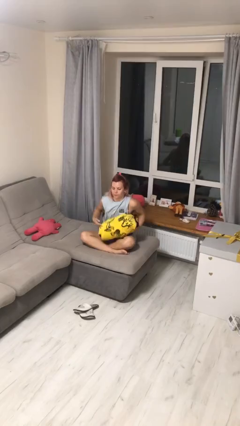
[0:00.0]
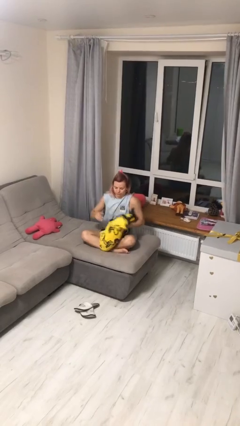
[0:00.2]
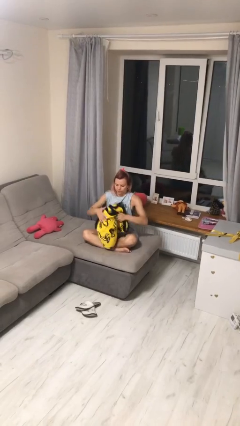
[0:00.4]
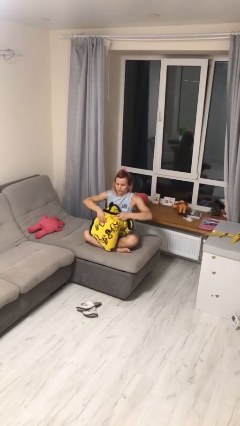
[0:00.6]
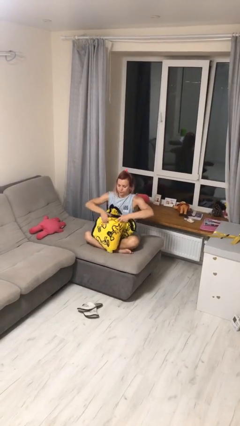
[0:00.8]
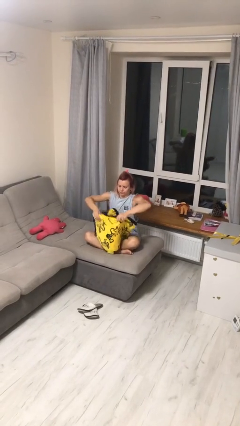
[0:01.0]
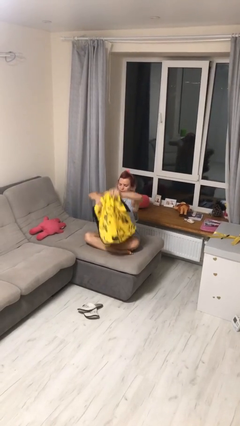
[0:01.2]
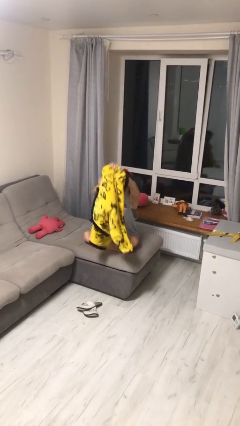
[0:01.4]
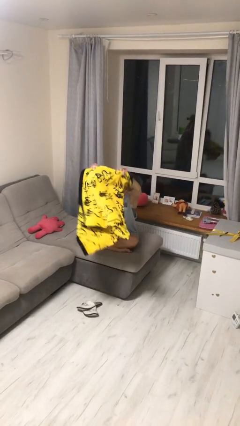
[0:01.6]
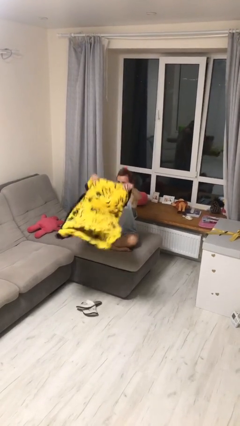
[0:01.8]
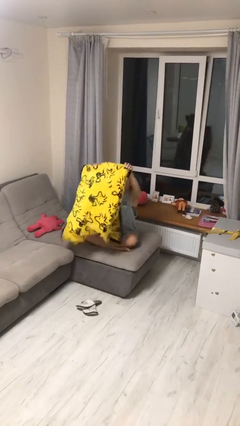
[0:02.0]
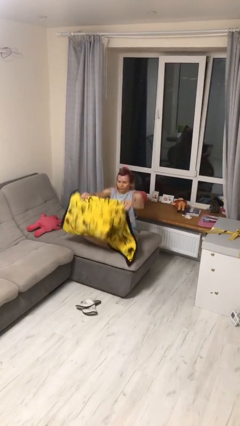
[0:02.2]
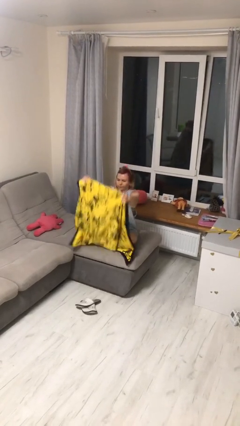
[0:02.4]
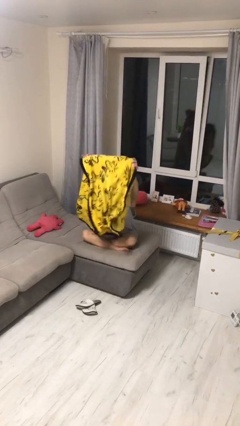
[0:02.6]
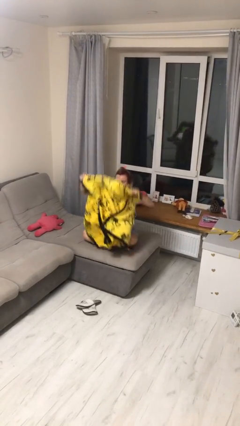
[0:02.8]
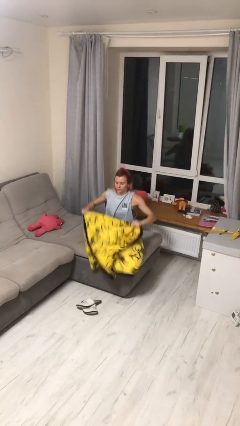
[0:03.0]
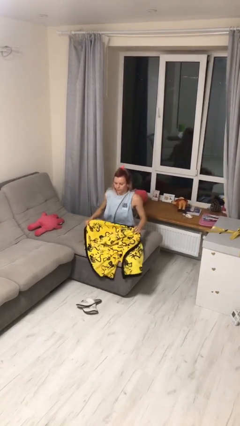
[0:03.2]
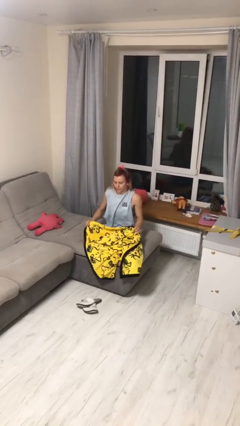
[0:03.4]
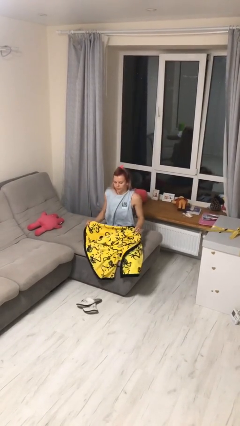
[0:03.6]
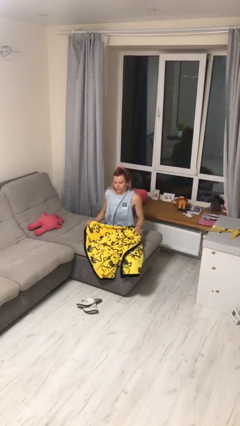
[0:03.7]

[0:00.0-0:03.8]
person unfolds blanket

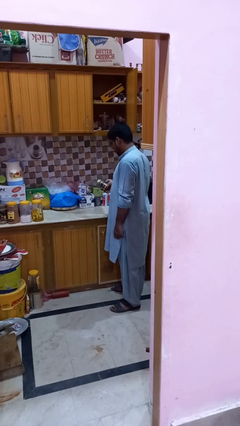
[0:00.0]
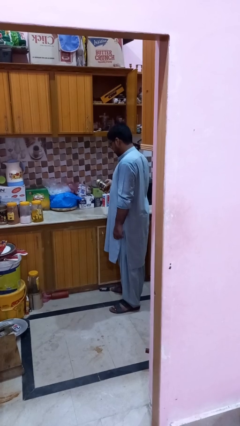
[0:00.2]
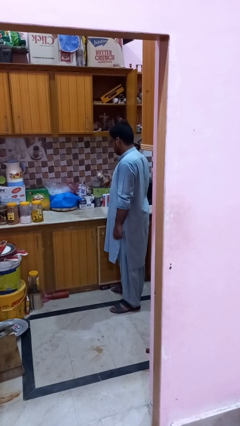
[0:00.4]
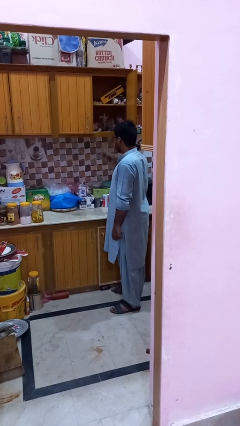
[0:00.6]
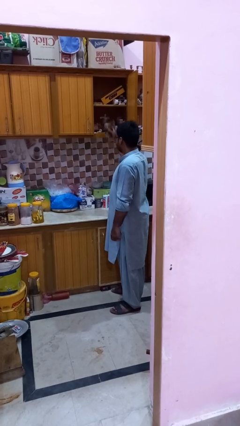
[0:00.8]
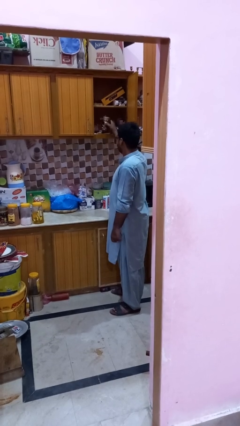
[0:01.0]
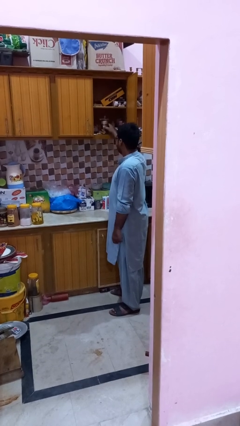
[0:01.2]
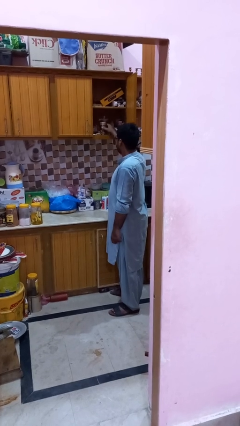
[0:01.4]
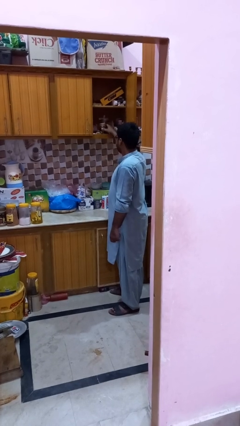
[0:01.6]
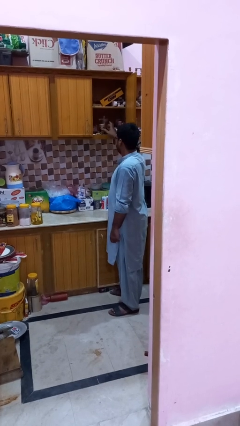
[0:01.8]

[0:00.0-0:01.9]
person puts down object into cabinet

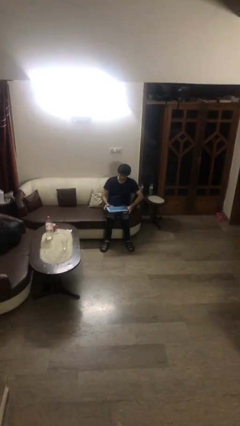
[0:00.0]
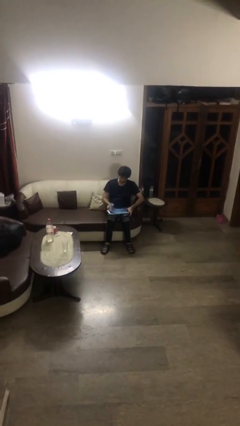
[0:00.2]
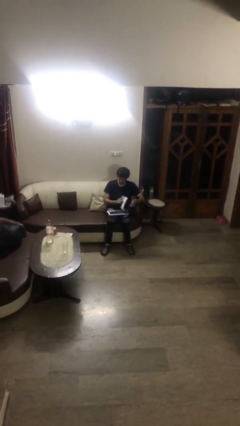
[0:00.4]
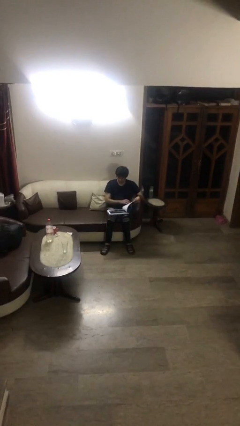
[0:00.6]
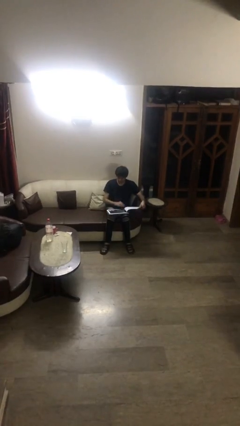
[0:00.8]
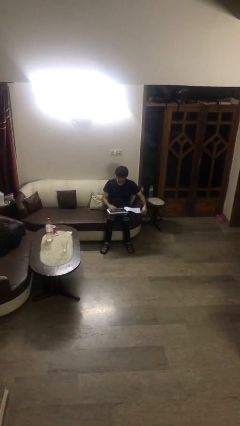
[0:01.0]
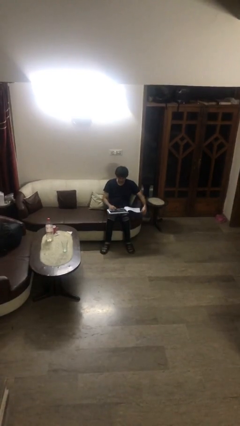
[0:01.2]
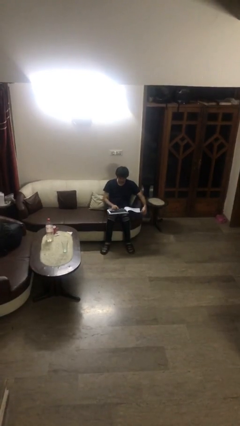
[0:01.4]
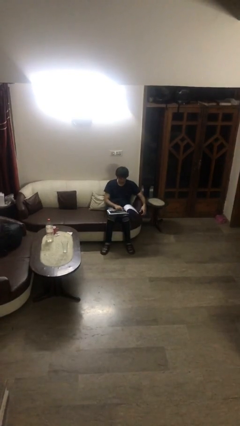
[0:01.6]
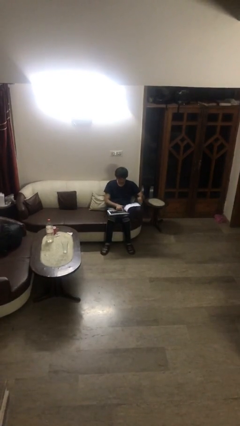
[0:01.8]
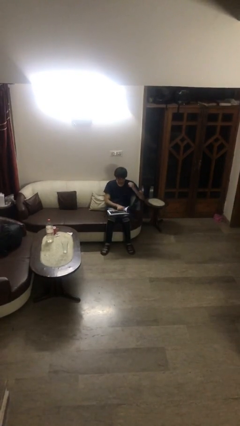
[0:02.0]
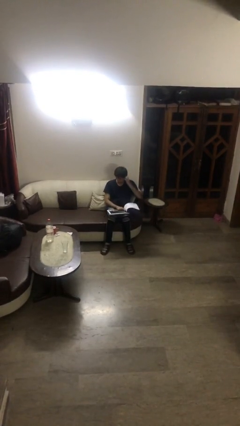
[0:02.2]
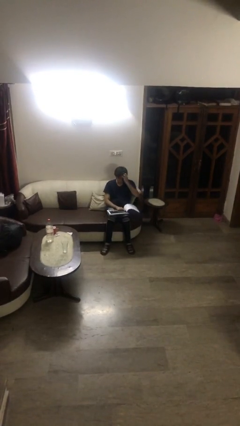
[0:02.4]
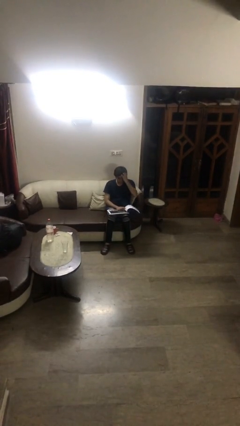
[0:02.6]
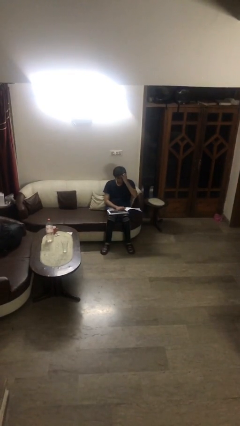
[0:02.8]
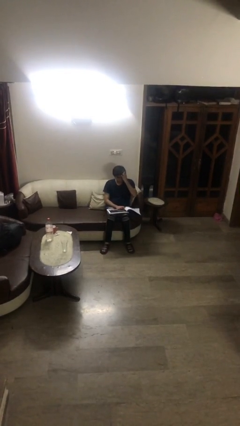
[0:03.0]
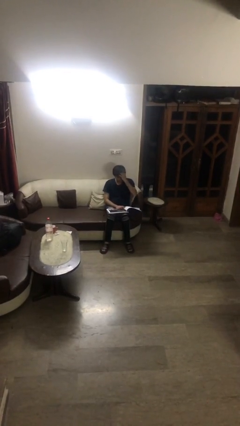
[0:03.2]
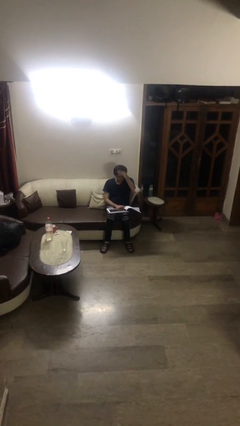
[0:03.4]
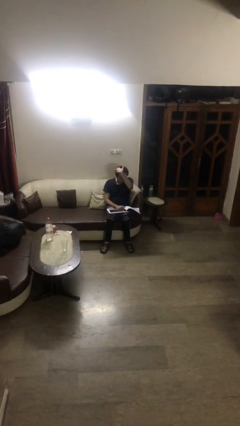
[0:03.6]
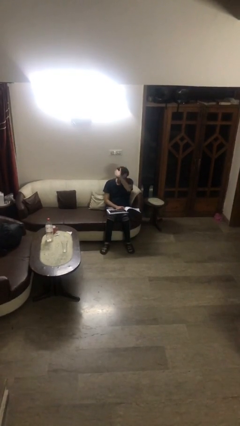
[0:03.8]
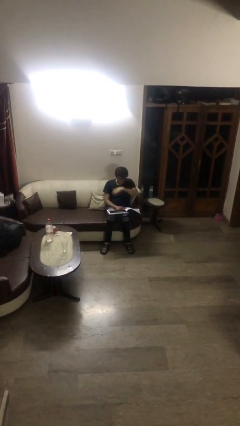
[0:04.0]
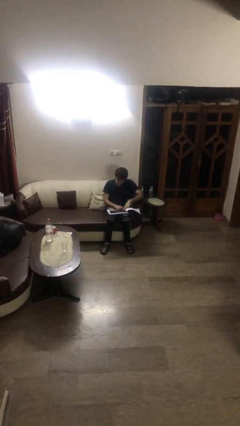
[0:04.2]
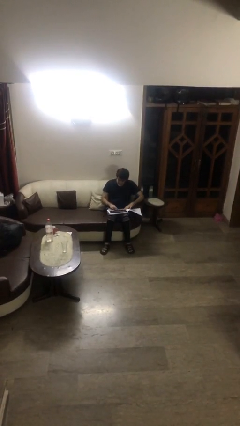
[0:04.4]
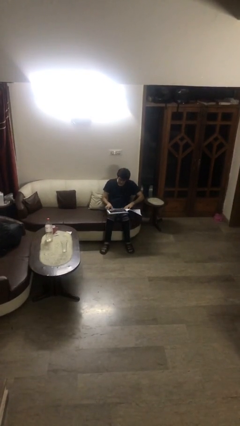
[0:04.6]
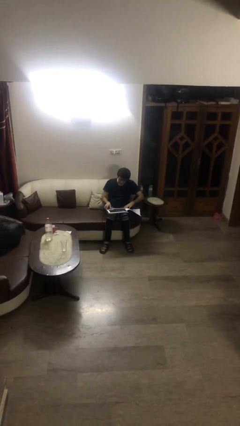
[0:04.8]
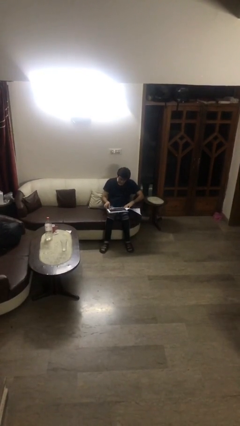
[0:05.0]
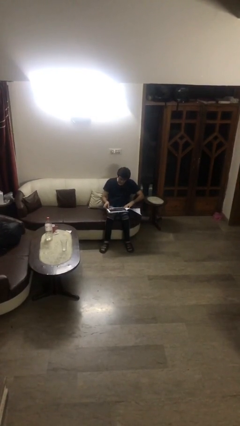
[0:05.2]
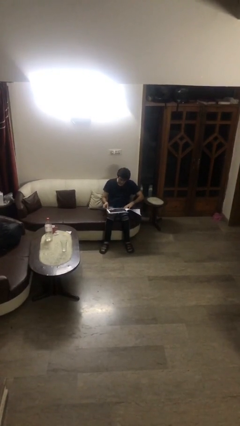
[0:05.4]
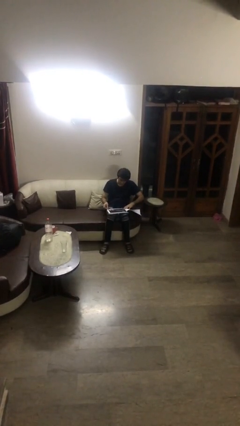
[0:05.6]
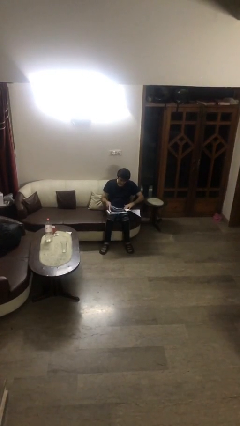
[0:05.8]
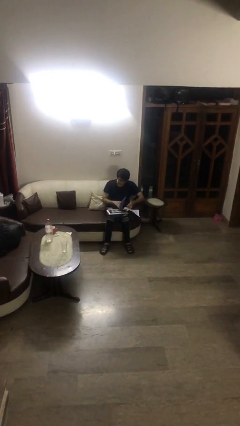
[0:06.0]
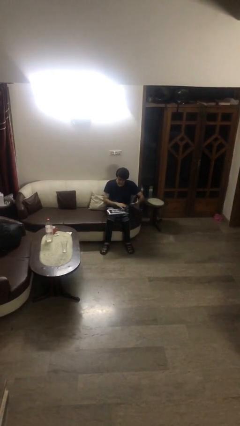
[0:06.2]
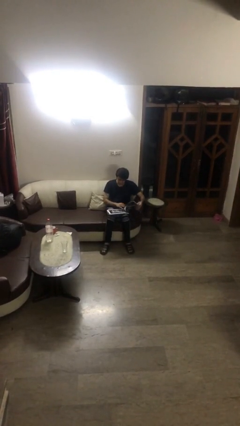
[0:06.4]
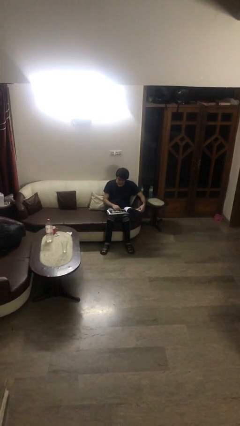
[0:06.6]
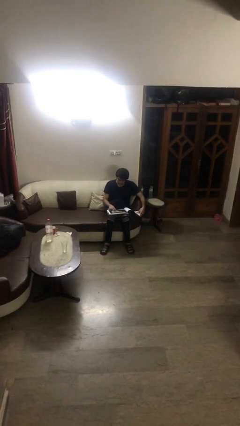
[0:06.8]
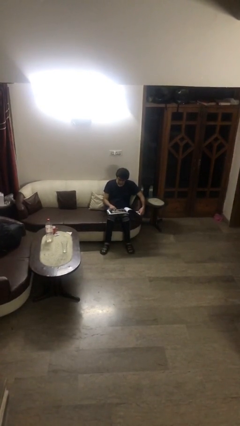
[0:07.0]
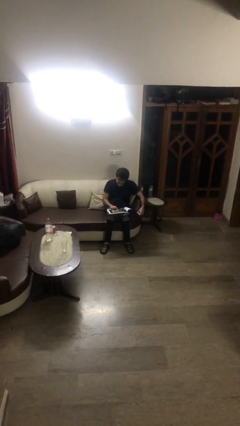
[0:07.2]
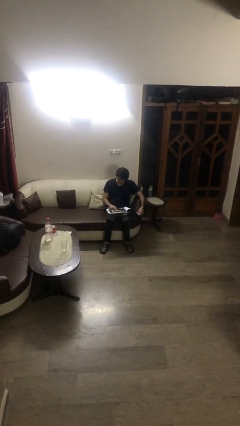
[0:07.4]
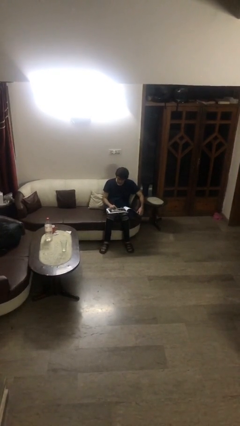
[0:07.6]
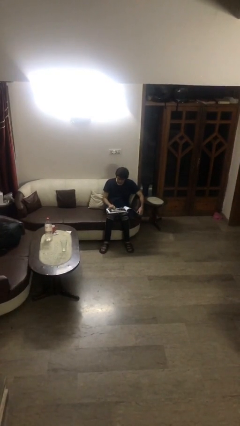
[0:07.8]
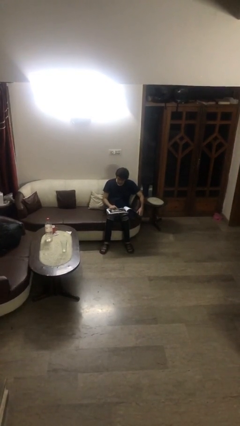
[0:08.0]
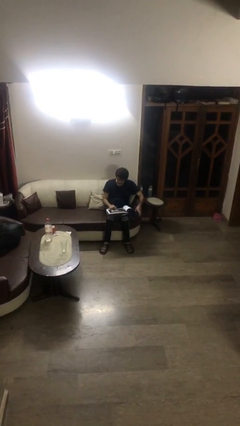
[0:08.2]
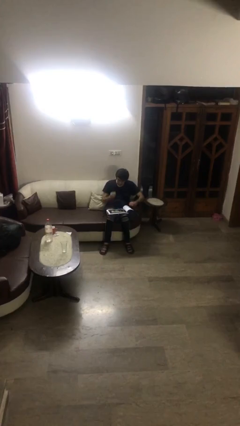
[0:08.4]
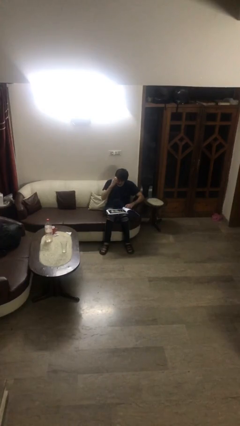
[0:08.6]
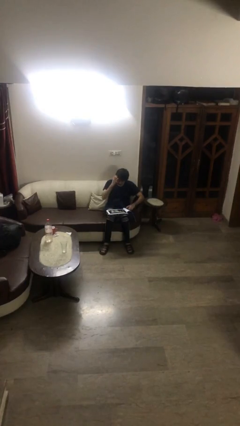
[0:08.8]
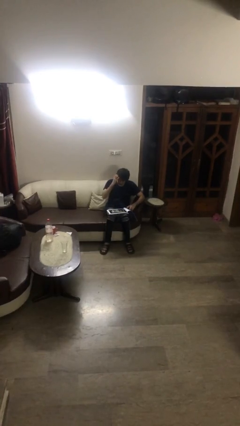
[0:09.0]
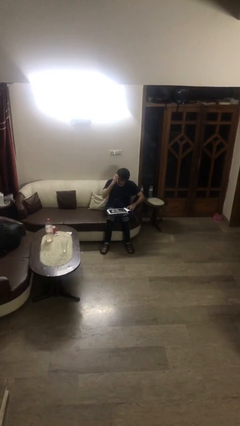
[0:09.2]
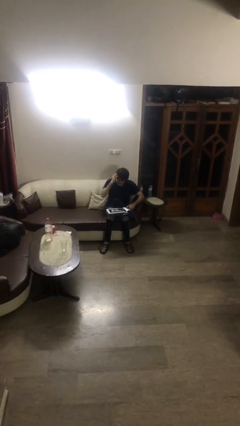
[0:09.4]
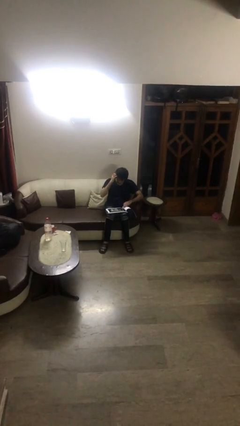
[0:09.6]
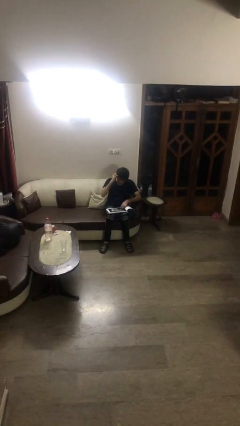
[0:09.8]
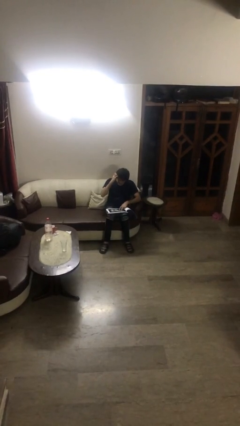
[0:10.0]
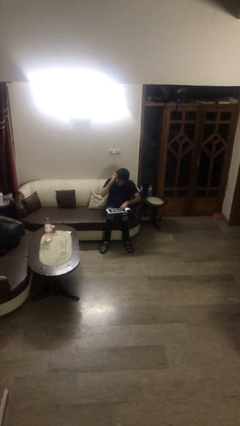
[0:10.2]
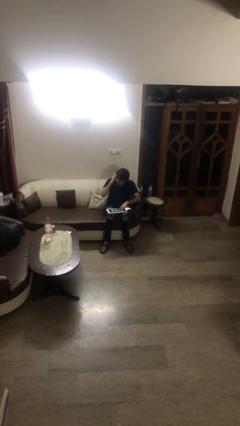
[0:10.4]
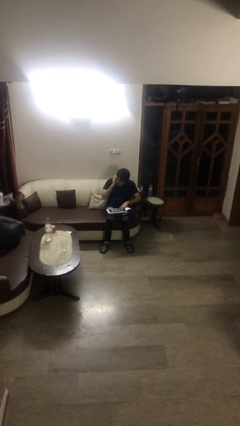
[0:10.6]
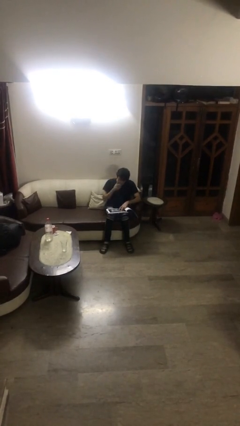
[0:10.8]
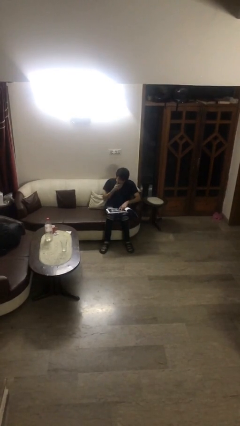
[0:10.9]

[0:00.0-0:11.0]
person reads document

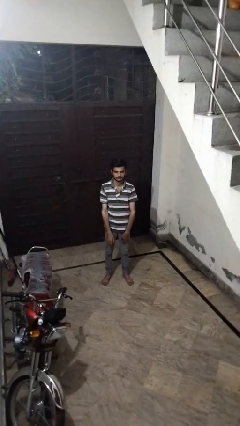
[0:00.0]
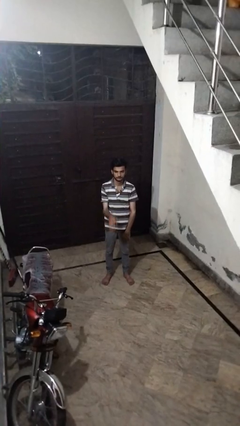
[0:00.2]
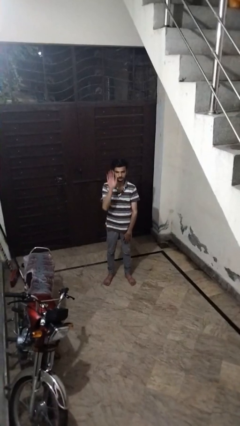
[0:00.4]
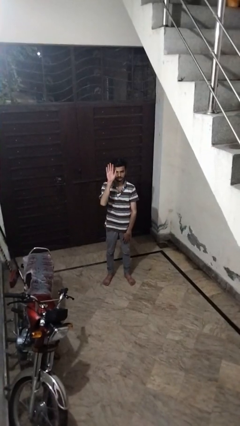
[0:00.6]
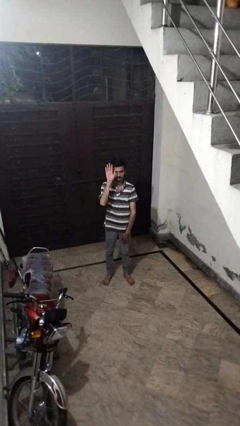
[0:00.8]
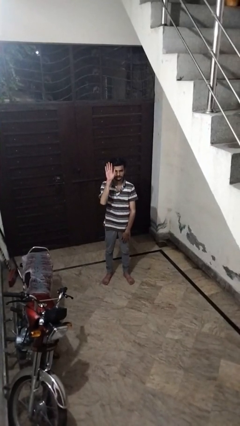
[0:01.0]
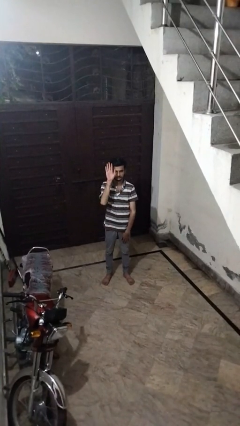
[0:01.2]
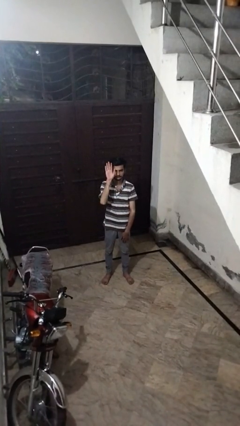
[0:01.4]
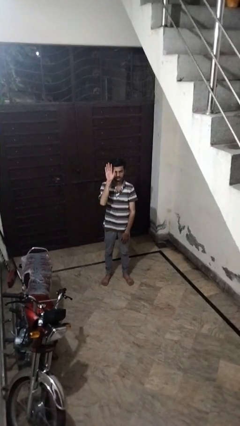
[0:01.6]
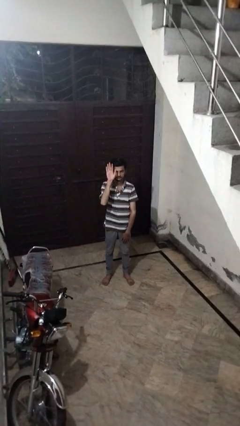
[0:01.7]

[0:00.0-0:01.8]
person gestures raise hand
